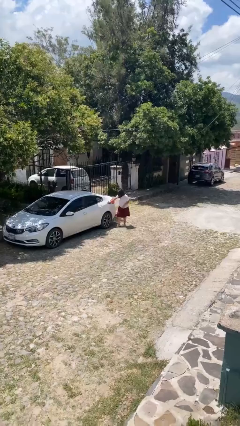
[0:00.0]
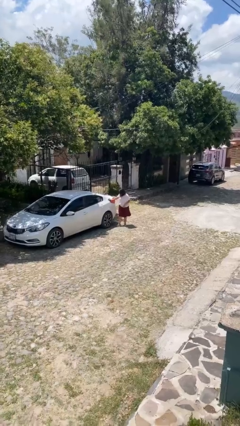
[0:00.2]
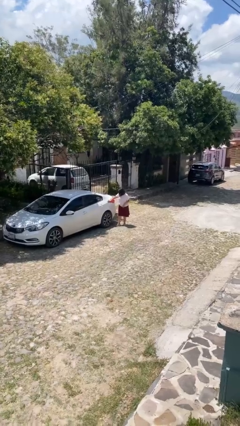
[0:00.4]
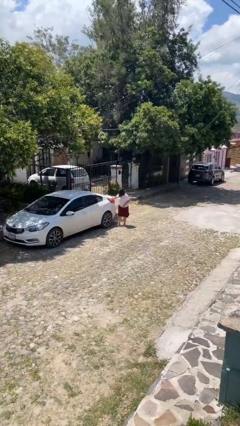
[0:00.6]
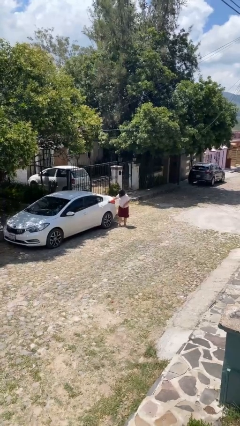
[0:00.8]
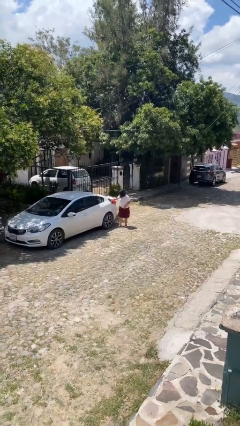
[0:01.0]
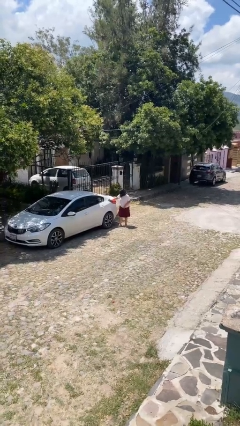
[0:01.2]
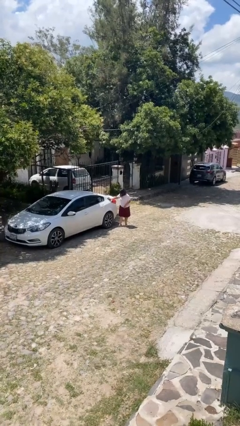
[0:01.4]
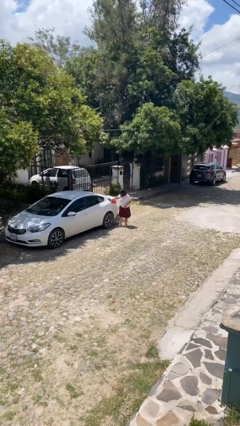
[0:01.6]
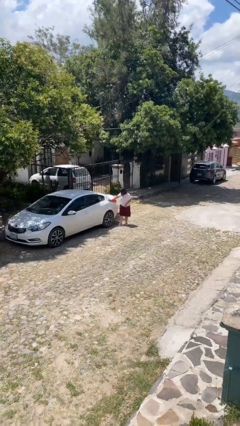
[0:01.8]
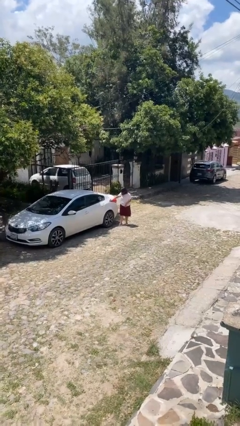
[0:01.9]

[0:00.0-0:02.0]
person polishes car with rag

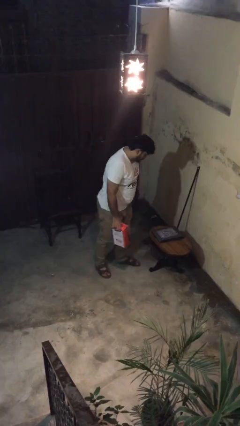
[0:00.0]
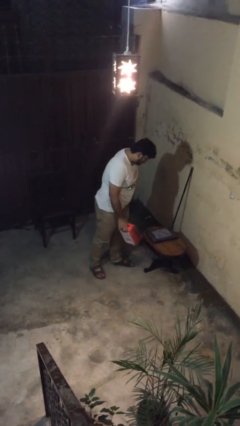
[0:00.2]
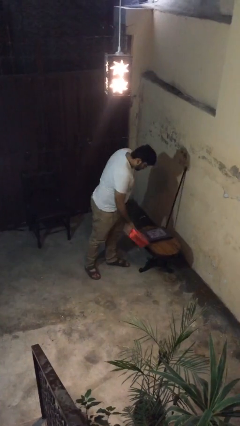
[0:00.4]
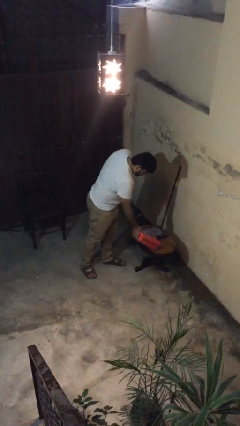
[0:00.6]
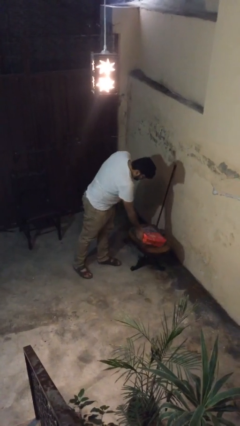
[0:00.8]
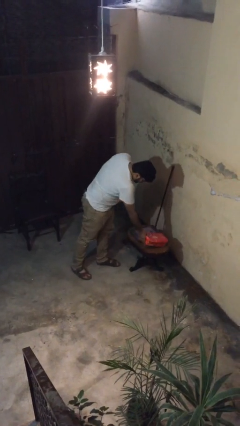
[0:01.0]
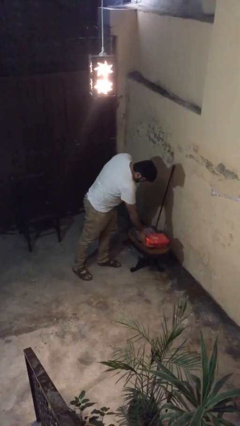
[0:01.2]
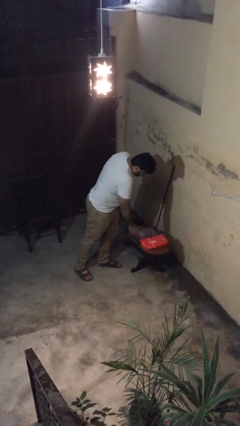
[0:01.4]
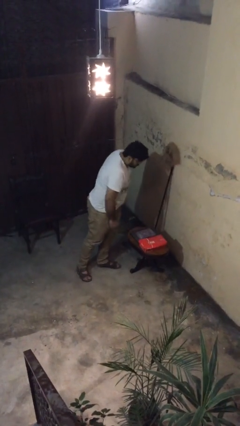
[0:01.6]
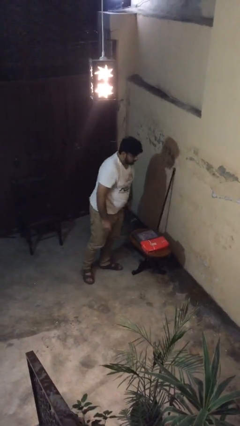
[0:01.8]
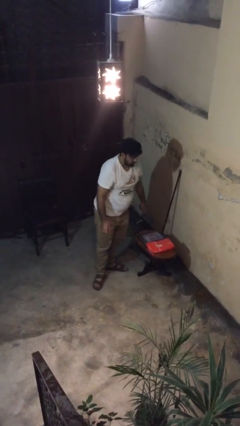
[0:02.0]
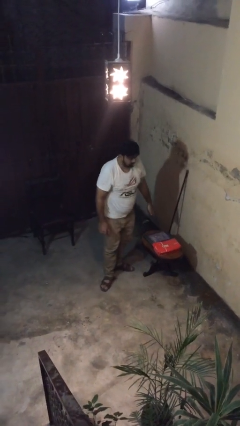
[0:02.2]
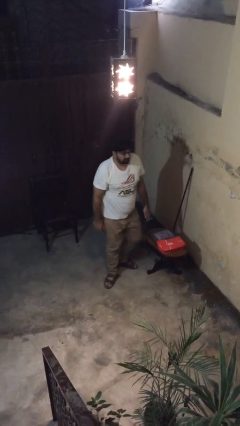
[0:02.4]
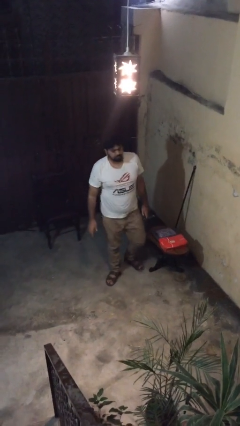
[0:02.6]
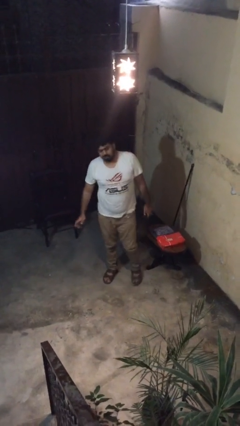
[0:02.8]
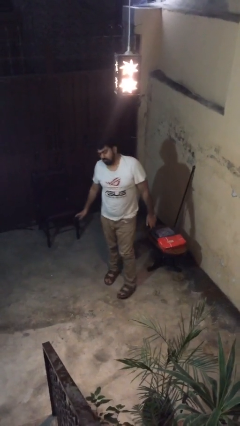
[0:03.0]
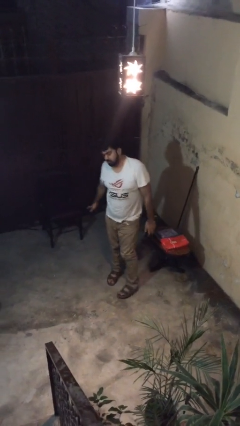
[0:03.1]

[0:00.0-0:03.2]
person puts down object on table

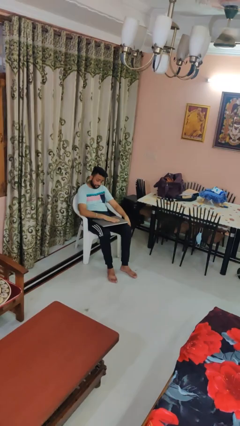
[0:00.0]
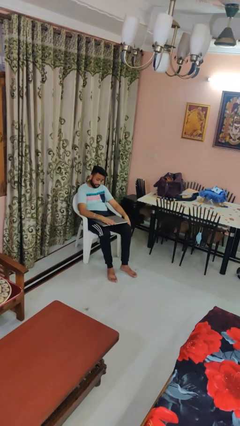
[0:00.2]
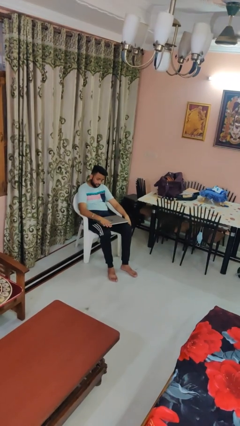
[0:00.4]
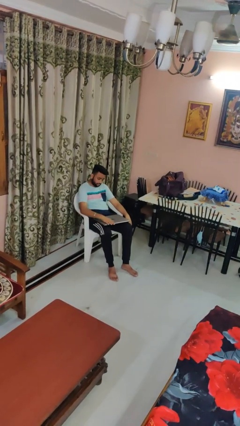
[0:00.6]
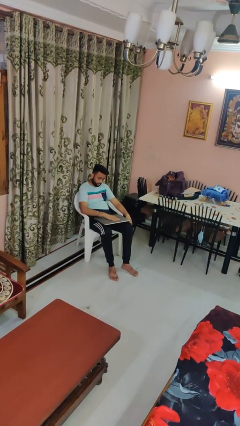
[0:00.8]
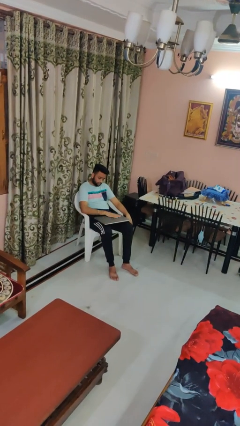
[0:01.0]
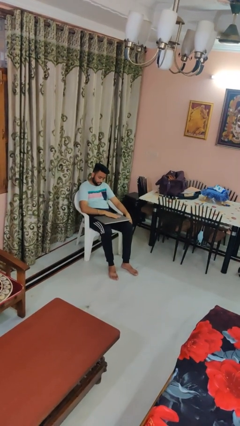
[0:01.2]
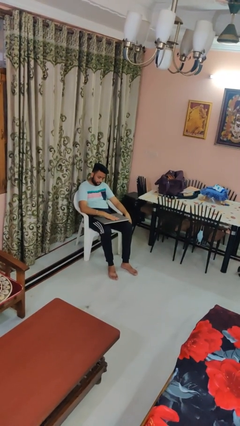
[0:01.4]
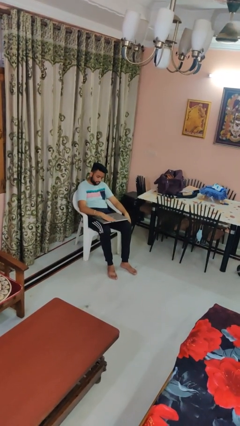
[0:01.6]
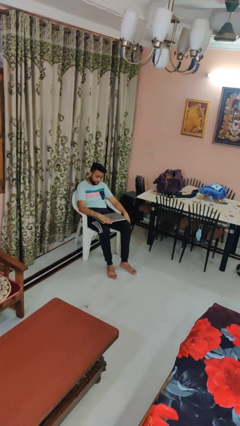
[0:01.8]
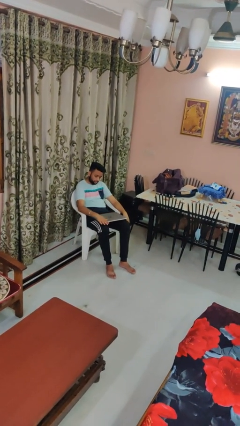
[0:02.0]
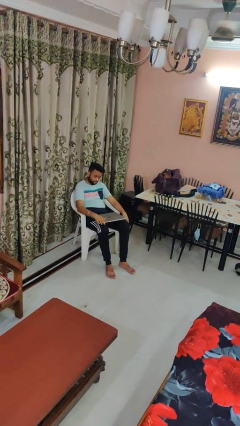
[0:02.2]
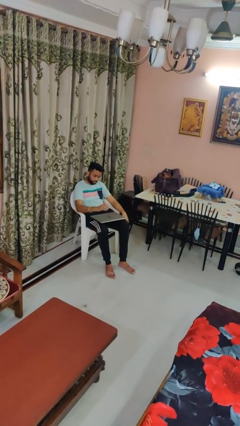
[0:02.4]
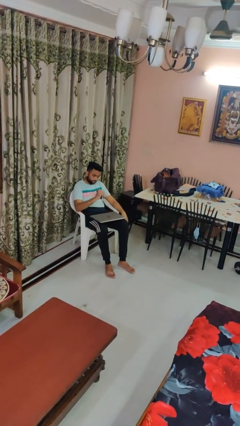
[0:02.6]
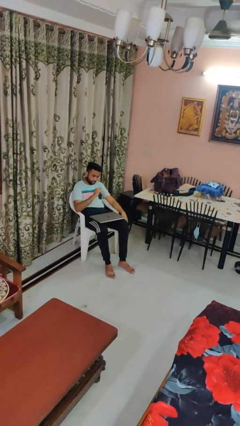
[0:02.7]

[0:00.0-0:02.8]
person waves hand over object

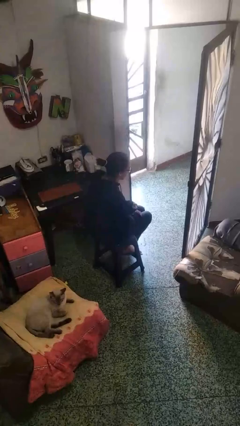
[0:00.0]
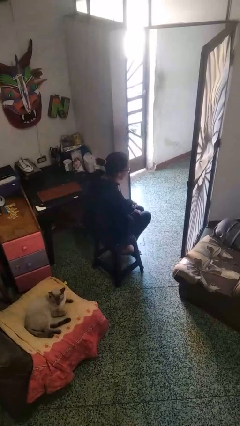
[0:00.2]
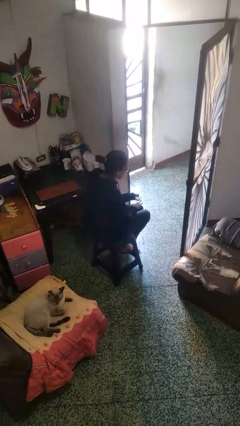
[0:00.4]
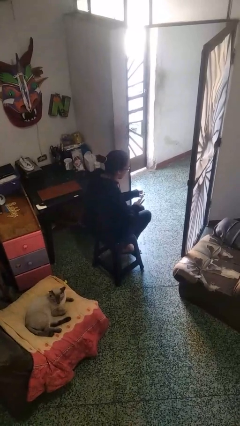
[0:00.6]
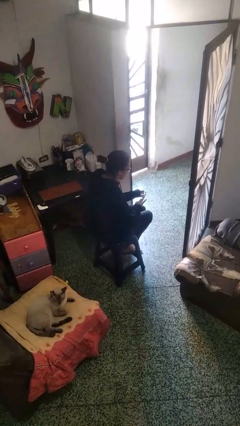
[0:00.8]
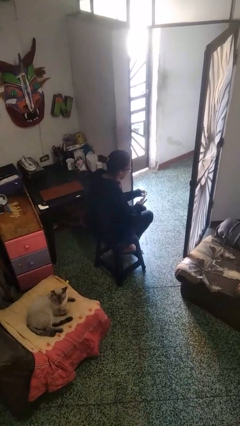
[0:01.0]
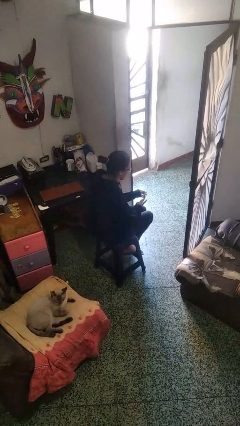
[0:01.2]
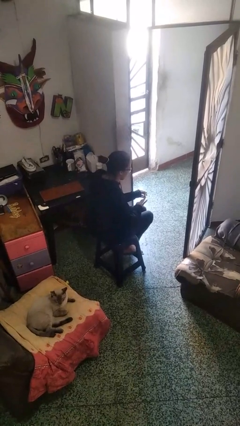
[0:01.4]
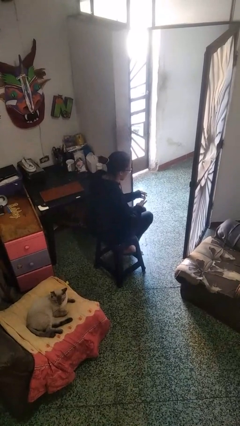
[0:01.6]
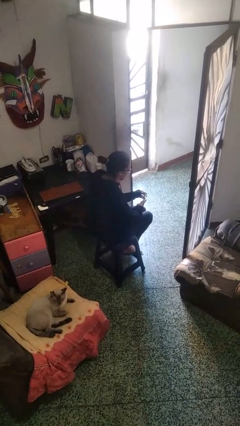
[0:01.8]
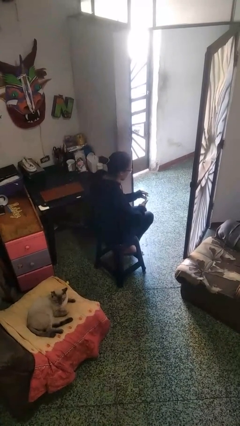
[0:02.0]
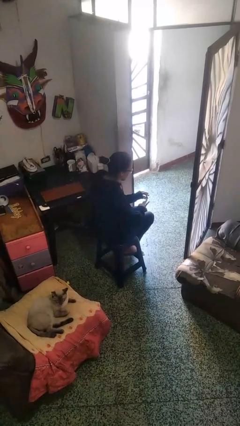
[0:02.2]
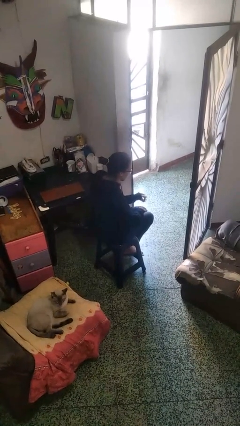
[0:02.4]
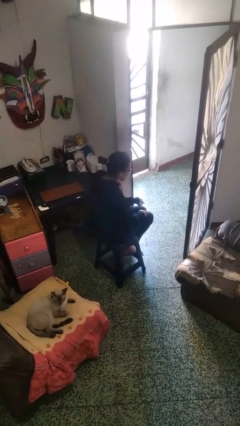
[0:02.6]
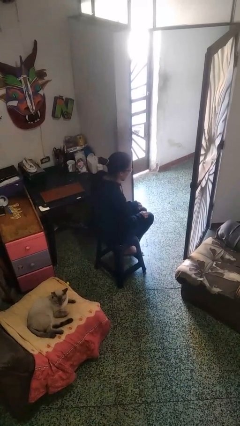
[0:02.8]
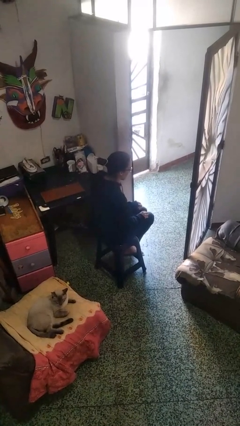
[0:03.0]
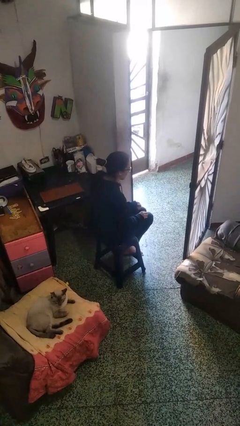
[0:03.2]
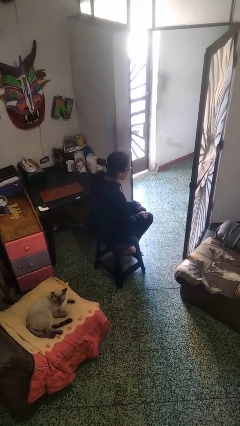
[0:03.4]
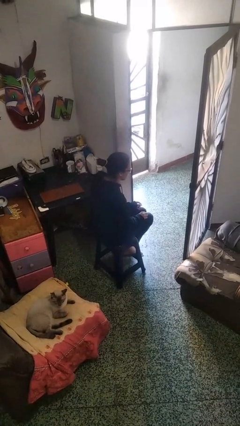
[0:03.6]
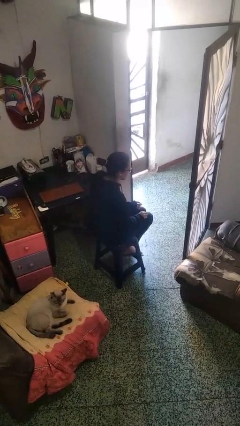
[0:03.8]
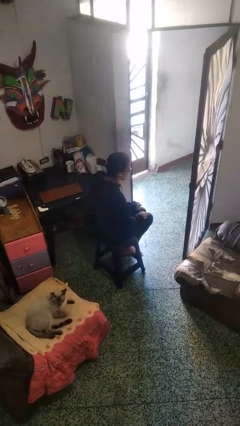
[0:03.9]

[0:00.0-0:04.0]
person clips fingernails

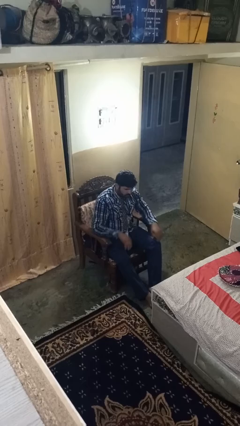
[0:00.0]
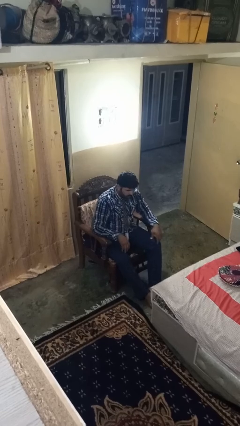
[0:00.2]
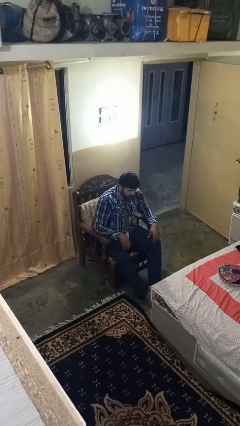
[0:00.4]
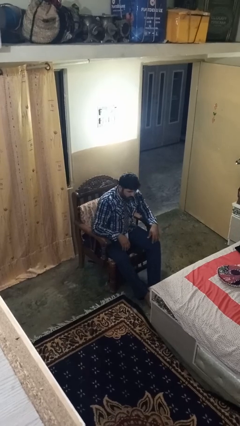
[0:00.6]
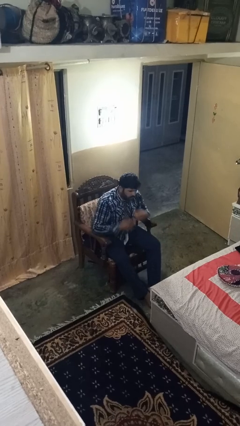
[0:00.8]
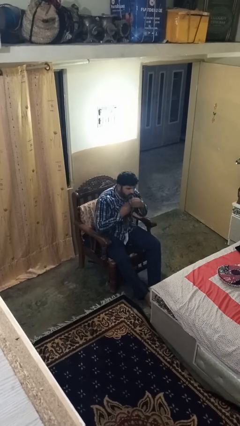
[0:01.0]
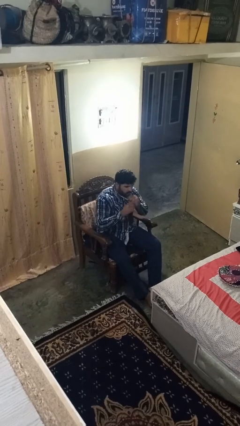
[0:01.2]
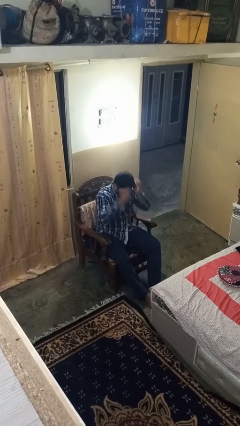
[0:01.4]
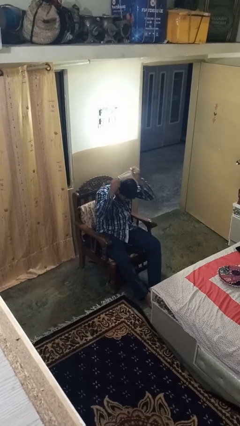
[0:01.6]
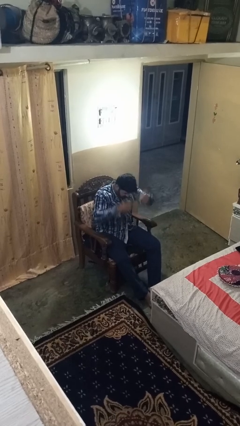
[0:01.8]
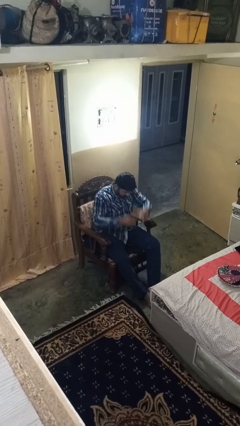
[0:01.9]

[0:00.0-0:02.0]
person takes off necktie

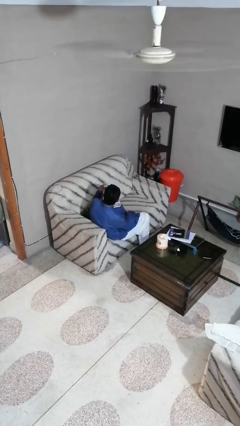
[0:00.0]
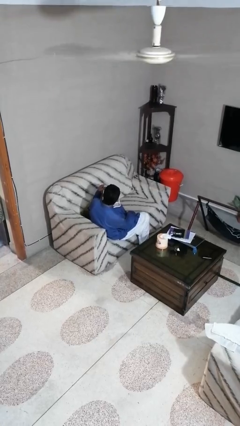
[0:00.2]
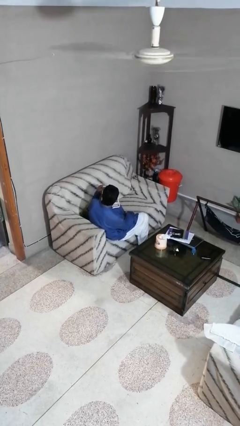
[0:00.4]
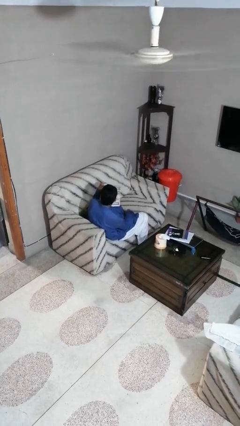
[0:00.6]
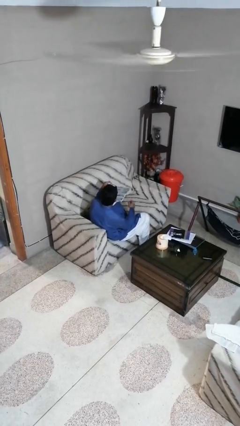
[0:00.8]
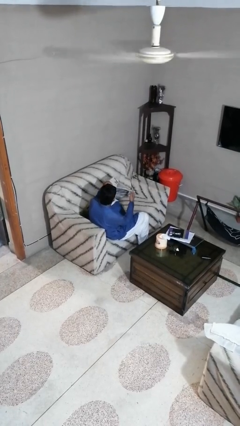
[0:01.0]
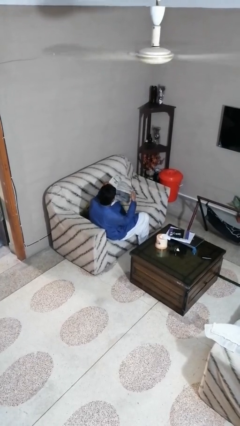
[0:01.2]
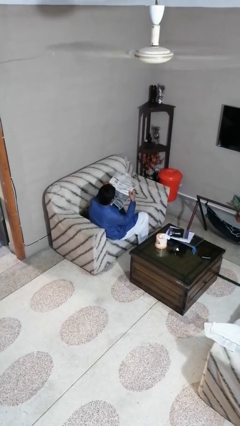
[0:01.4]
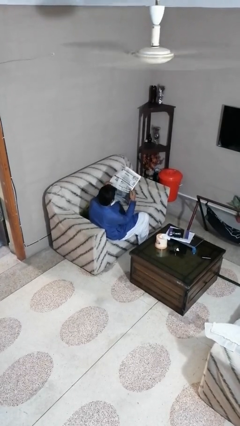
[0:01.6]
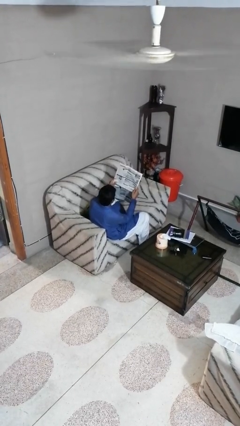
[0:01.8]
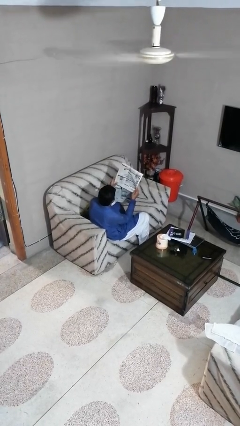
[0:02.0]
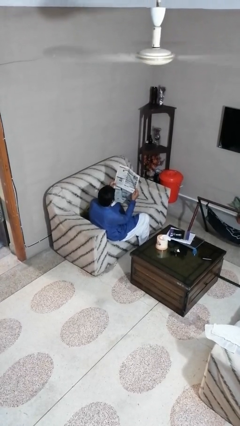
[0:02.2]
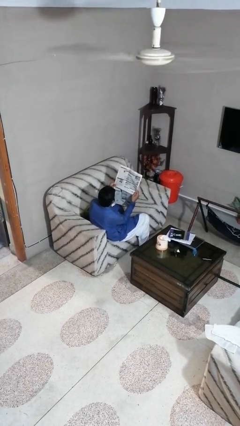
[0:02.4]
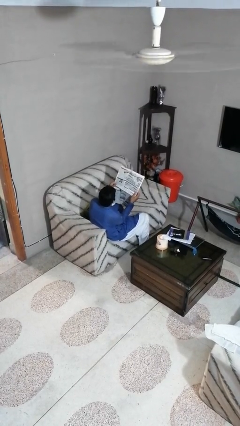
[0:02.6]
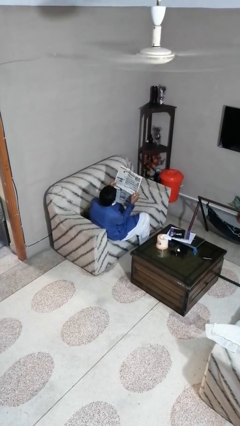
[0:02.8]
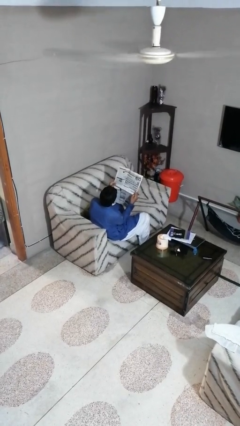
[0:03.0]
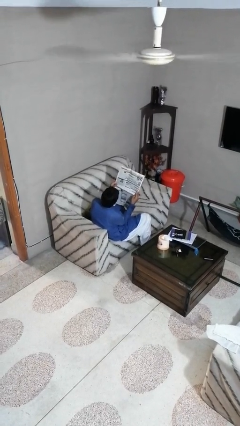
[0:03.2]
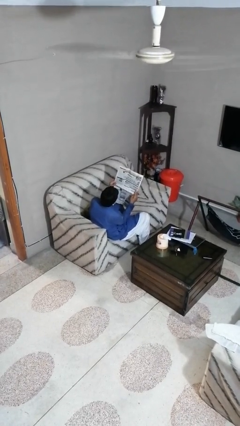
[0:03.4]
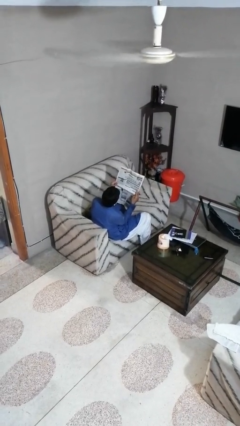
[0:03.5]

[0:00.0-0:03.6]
person reads newspaper
